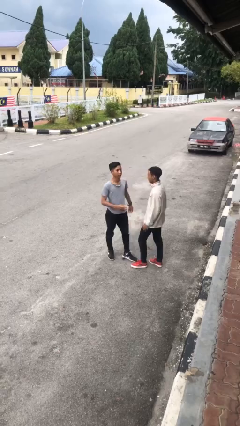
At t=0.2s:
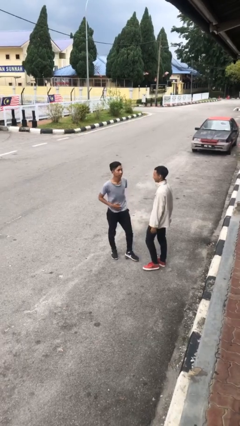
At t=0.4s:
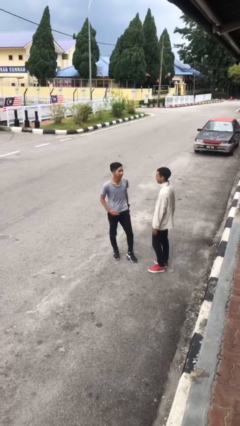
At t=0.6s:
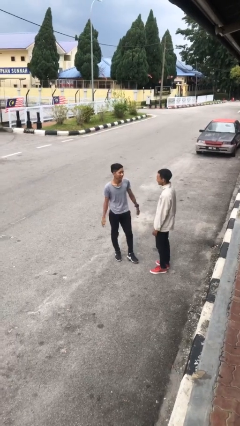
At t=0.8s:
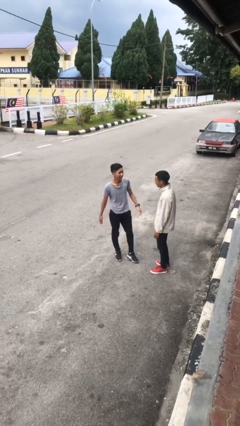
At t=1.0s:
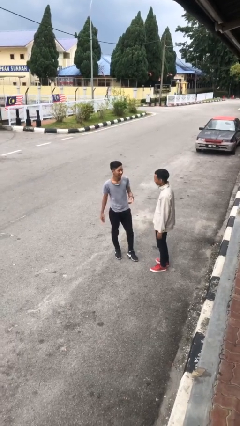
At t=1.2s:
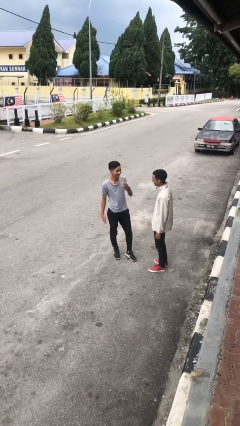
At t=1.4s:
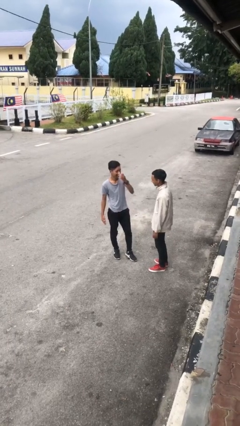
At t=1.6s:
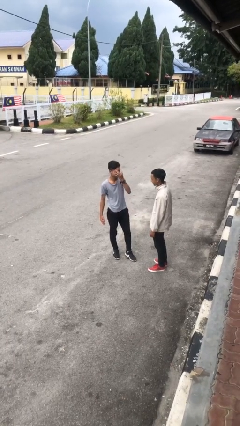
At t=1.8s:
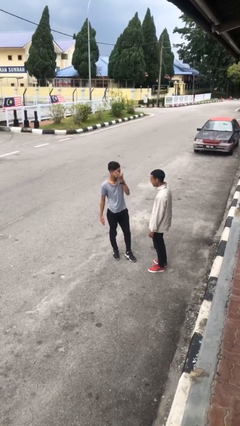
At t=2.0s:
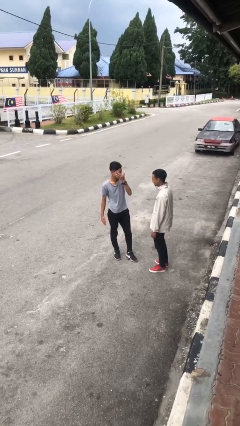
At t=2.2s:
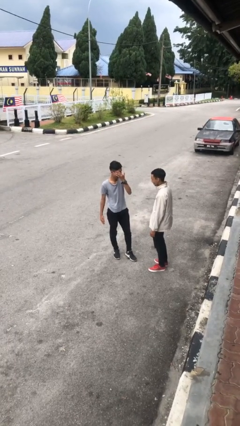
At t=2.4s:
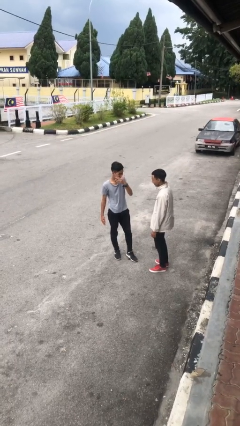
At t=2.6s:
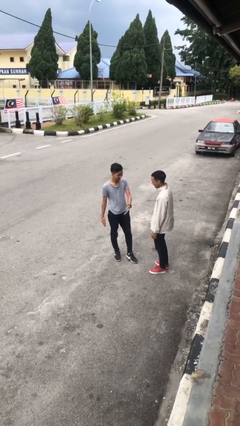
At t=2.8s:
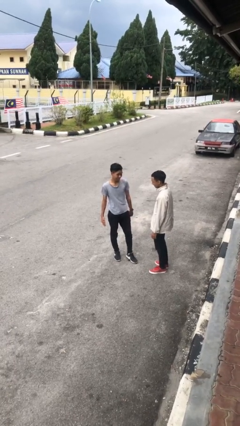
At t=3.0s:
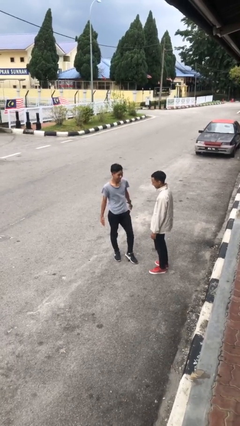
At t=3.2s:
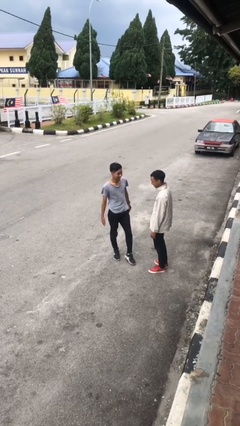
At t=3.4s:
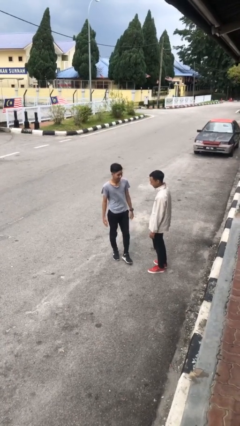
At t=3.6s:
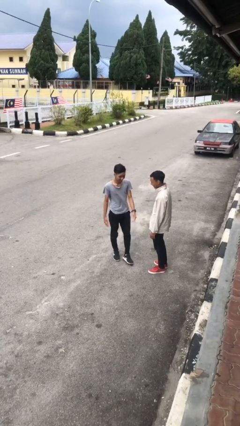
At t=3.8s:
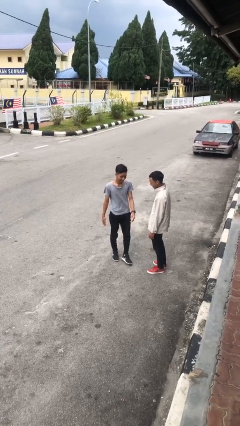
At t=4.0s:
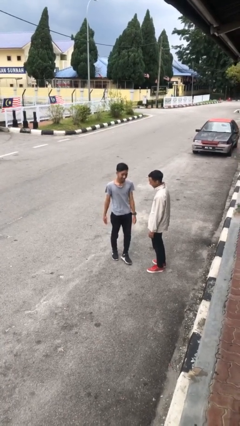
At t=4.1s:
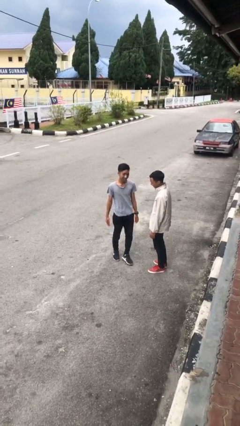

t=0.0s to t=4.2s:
person talks to person

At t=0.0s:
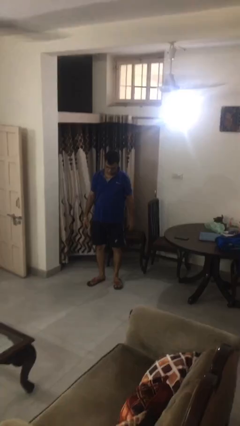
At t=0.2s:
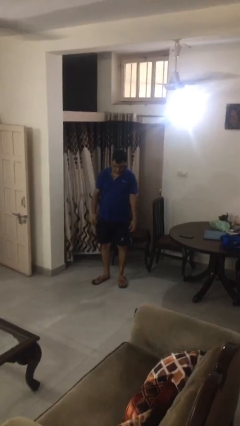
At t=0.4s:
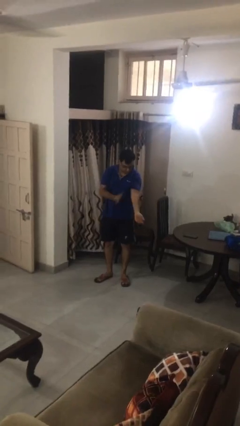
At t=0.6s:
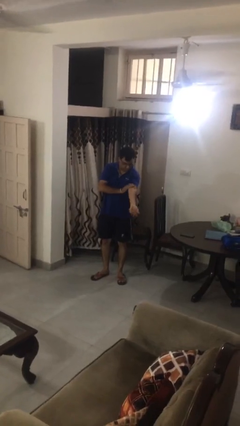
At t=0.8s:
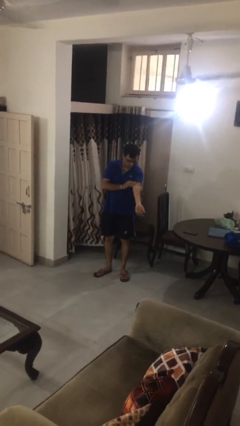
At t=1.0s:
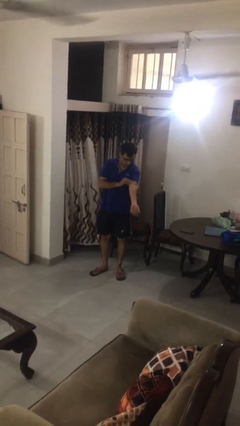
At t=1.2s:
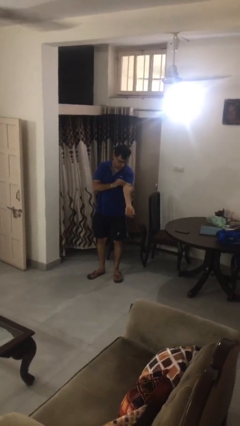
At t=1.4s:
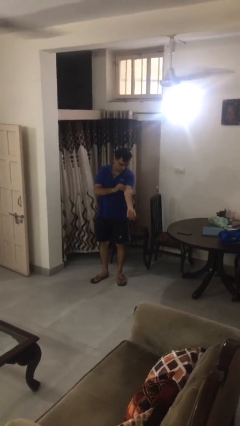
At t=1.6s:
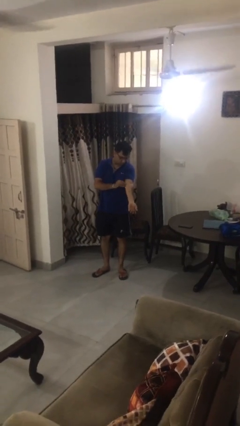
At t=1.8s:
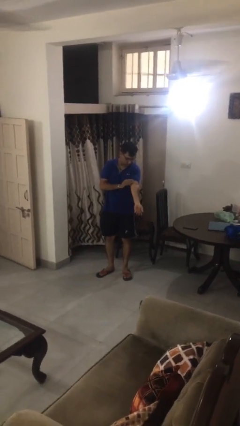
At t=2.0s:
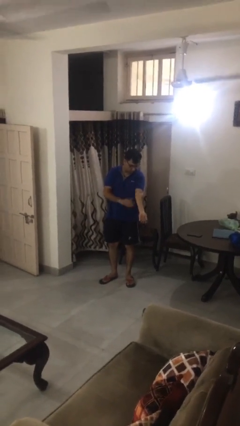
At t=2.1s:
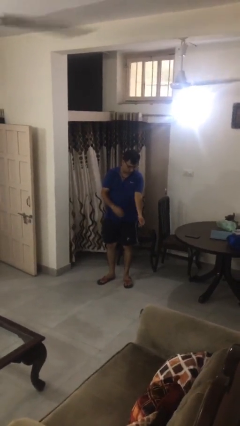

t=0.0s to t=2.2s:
person swats bug

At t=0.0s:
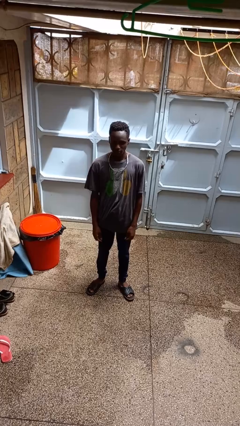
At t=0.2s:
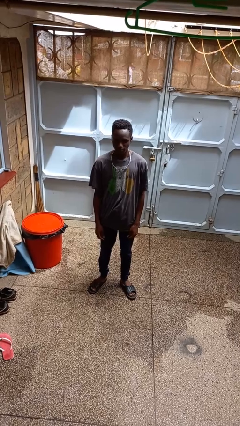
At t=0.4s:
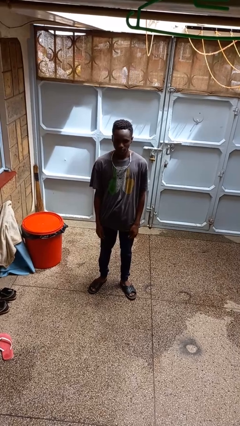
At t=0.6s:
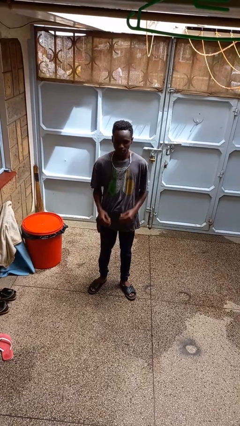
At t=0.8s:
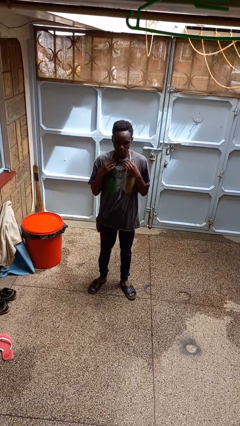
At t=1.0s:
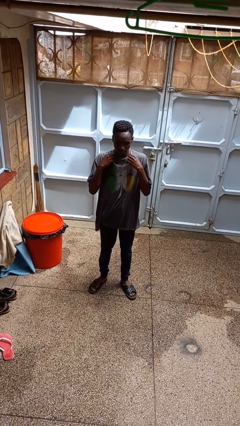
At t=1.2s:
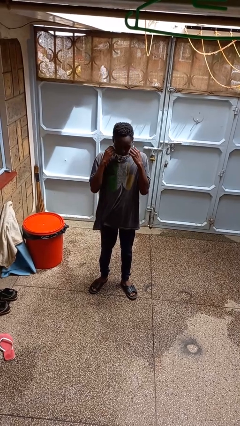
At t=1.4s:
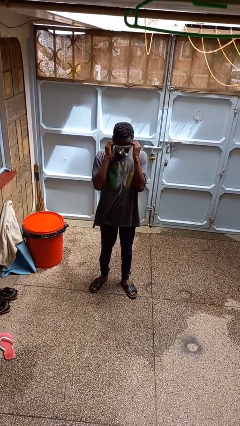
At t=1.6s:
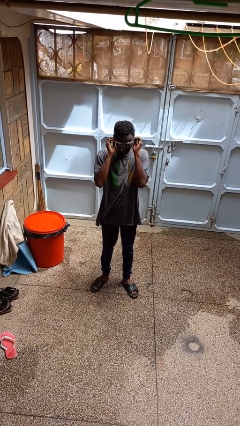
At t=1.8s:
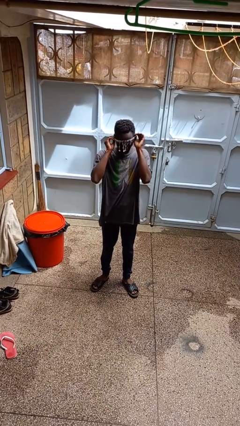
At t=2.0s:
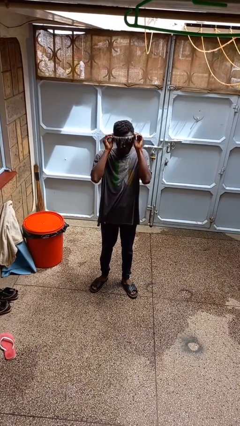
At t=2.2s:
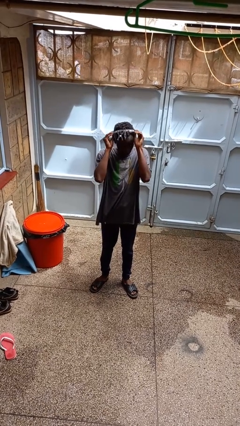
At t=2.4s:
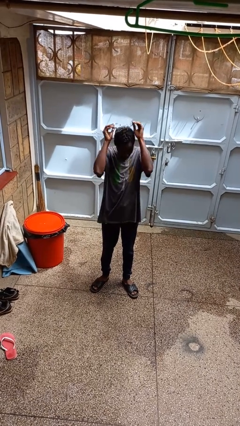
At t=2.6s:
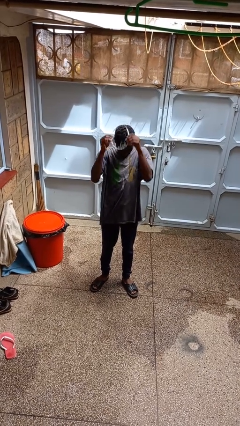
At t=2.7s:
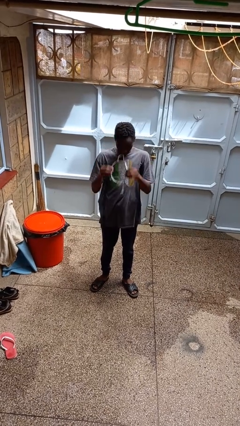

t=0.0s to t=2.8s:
person takes off necklace

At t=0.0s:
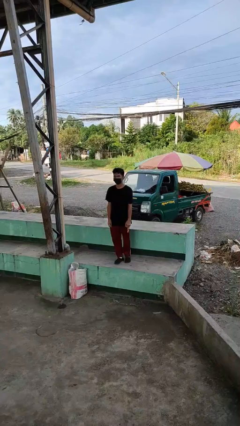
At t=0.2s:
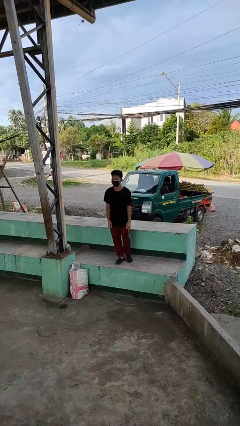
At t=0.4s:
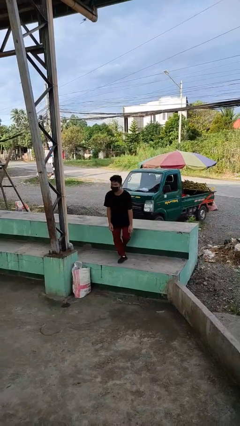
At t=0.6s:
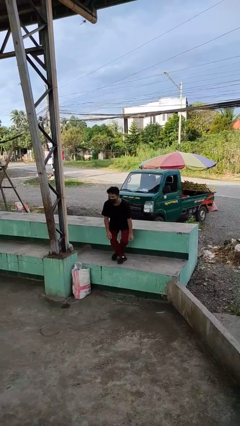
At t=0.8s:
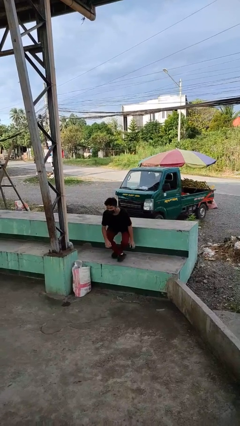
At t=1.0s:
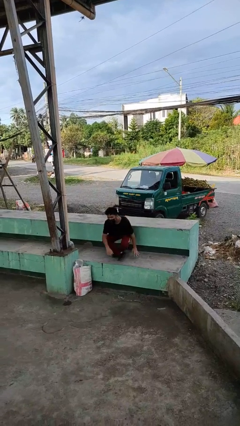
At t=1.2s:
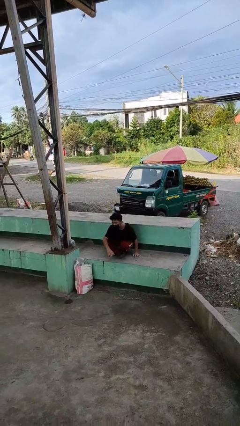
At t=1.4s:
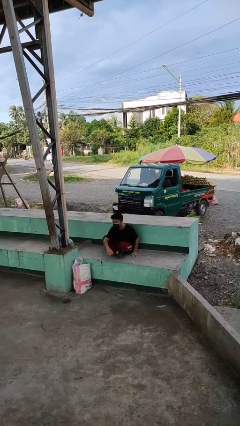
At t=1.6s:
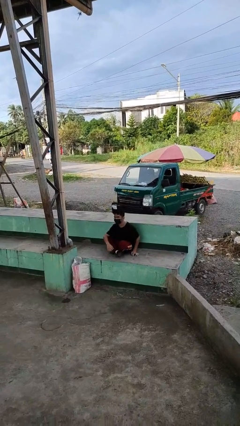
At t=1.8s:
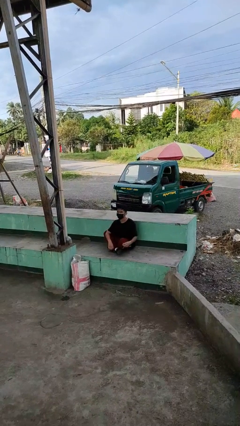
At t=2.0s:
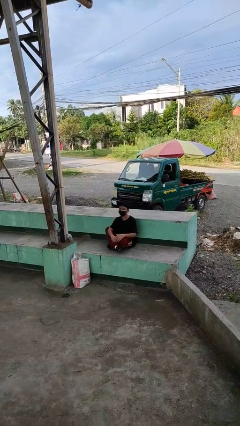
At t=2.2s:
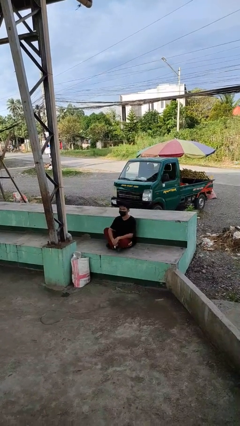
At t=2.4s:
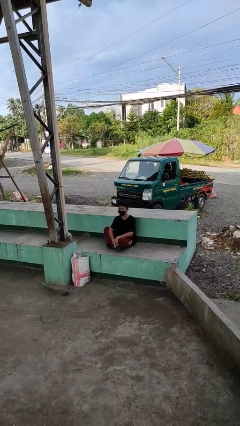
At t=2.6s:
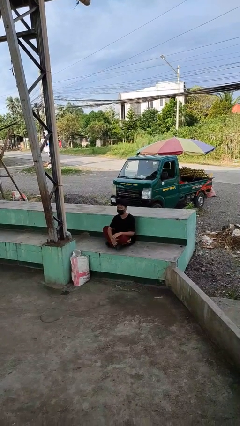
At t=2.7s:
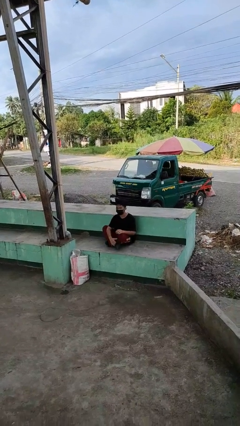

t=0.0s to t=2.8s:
person sits crisscross

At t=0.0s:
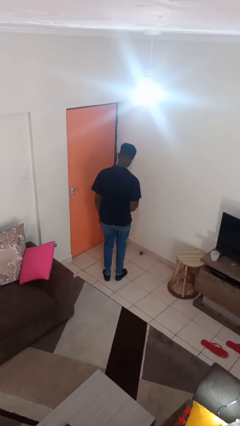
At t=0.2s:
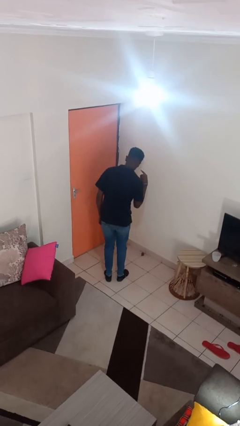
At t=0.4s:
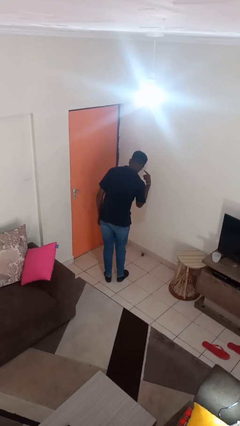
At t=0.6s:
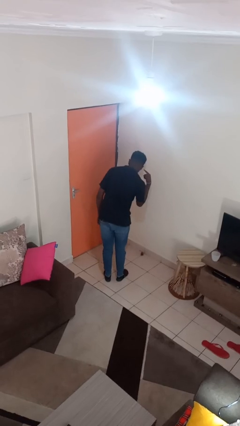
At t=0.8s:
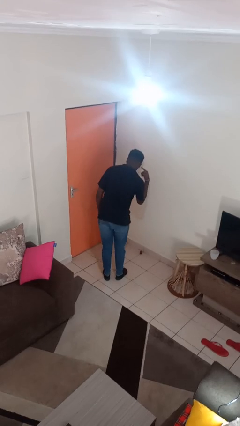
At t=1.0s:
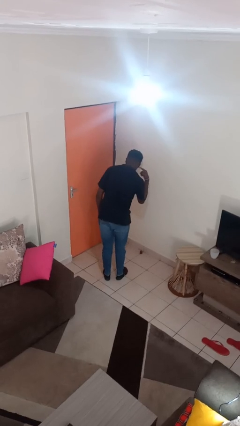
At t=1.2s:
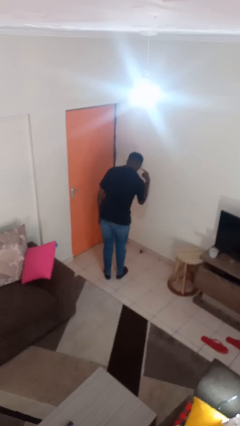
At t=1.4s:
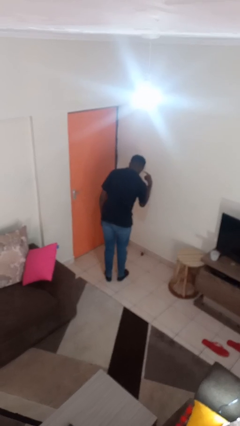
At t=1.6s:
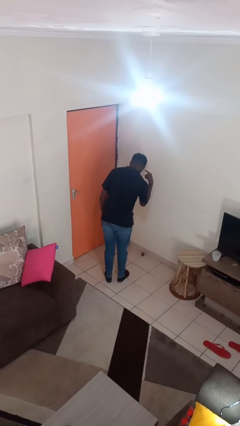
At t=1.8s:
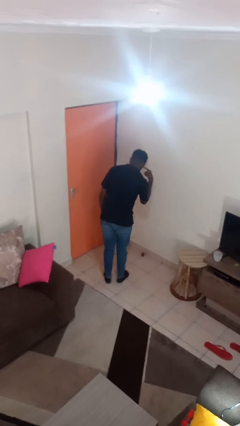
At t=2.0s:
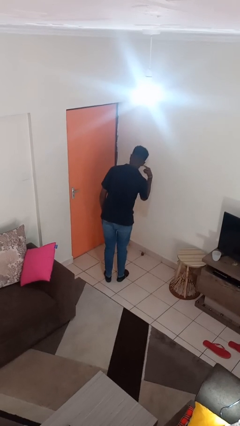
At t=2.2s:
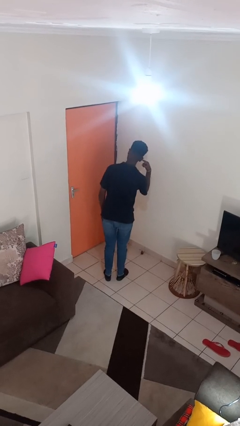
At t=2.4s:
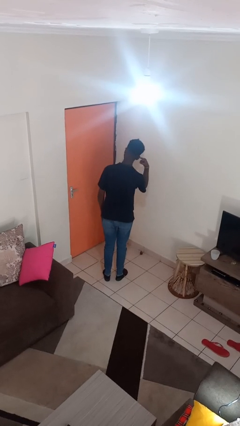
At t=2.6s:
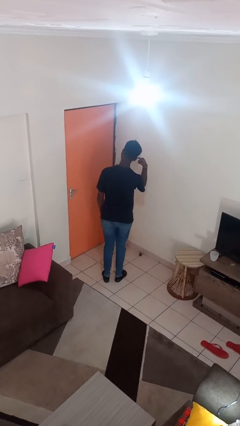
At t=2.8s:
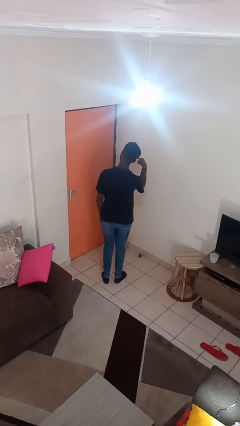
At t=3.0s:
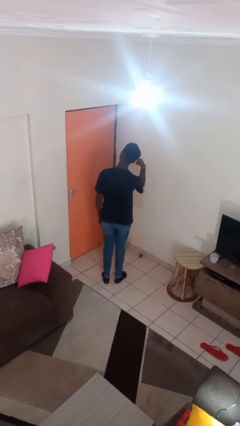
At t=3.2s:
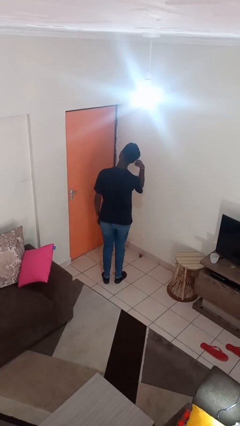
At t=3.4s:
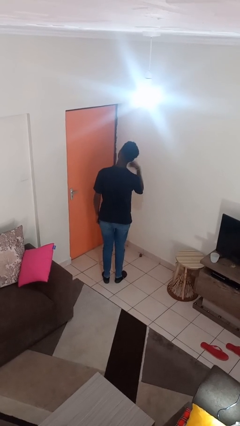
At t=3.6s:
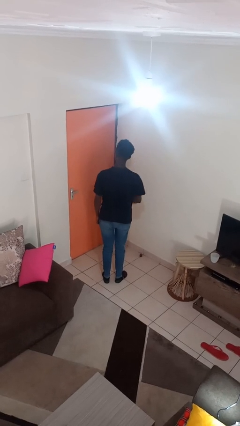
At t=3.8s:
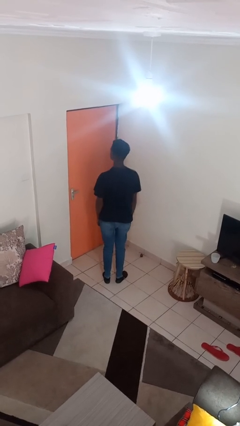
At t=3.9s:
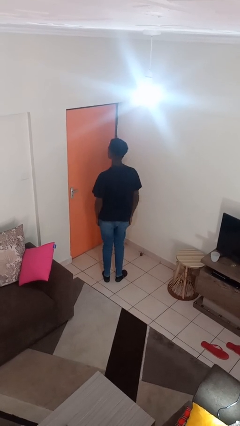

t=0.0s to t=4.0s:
person gestures listen closely

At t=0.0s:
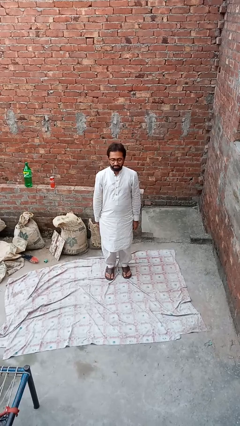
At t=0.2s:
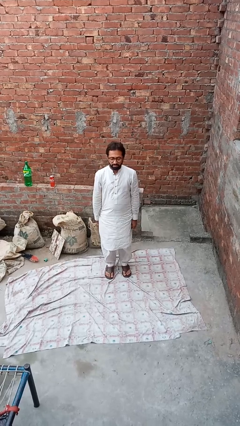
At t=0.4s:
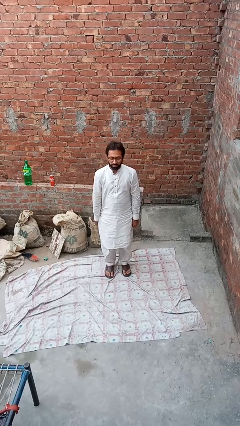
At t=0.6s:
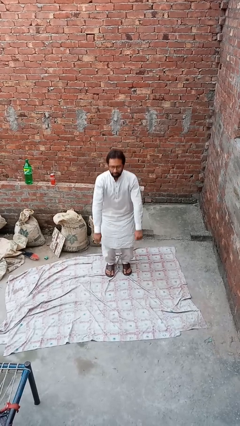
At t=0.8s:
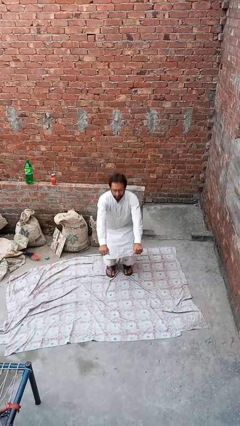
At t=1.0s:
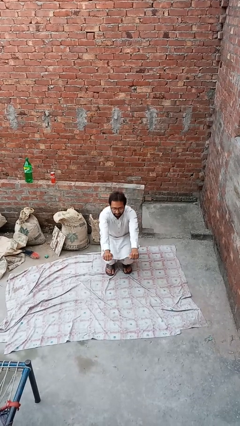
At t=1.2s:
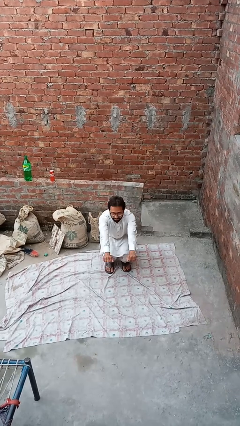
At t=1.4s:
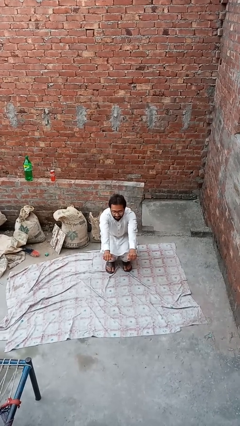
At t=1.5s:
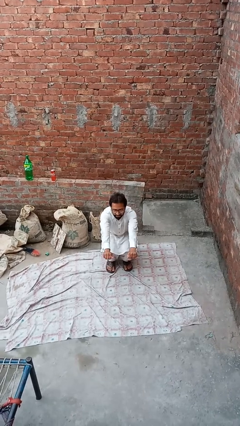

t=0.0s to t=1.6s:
person squats
